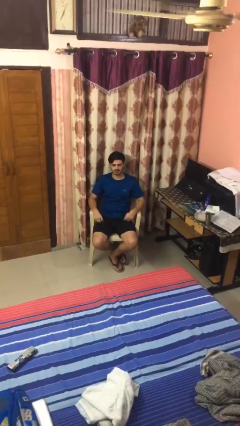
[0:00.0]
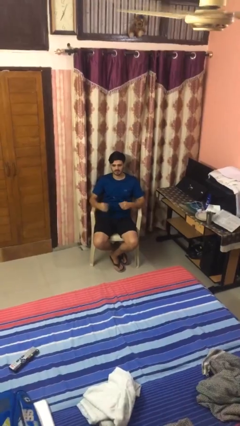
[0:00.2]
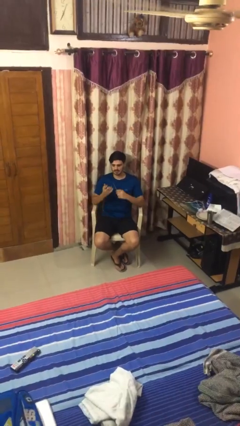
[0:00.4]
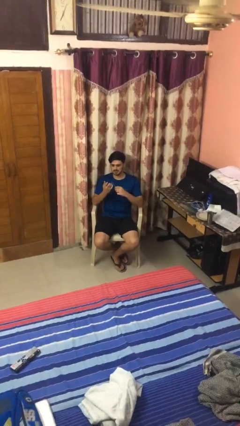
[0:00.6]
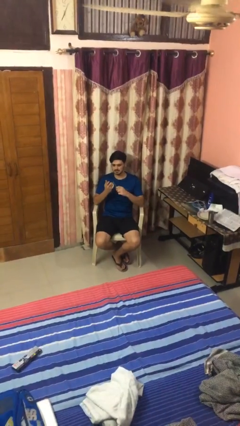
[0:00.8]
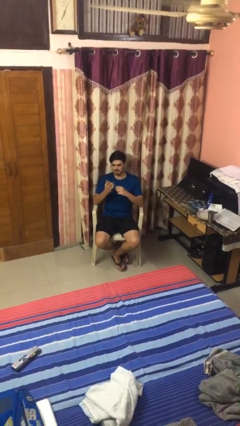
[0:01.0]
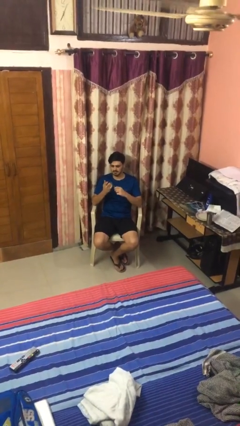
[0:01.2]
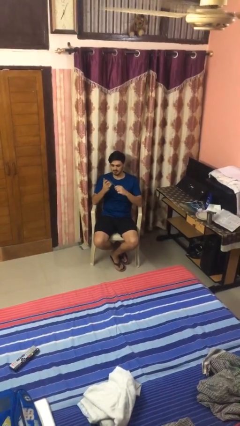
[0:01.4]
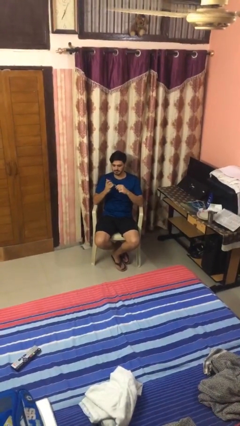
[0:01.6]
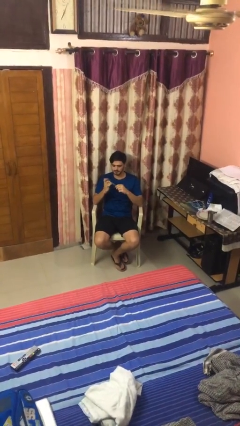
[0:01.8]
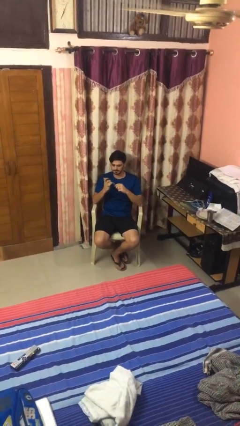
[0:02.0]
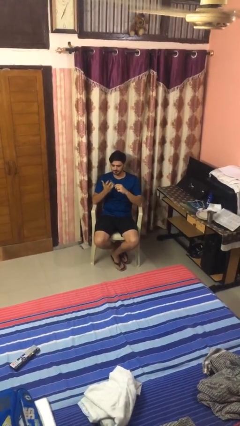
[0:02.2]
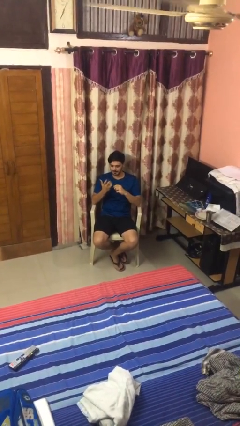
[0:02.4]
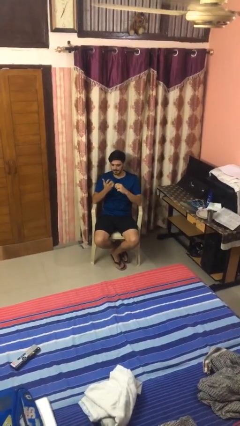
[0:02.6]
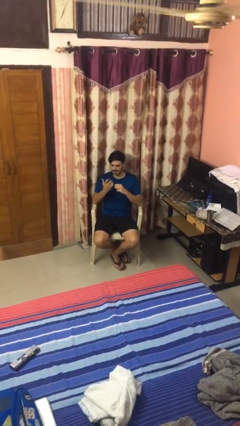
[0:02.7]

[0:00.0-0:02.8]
person files fingernails

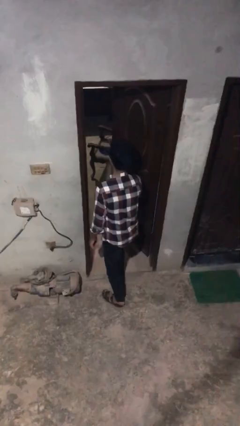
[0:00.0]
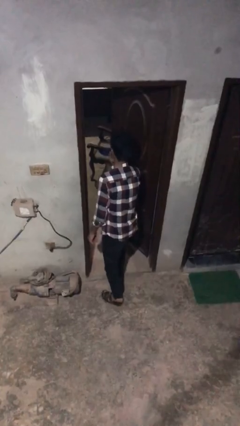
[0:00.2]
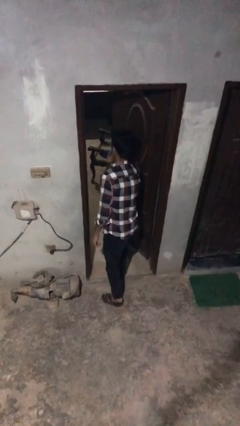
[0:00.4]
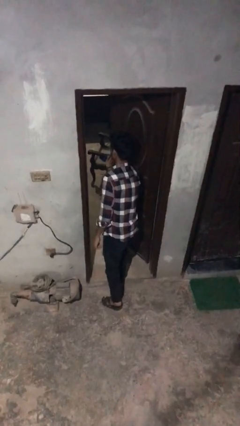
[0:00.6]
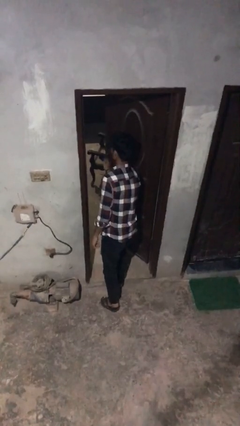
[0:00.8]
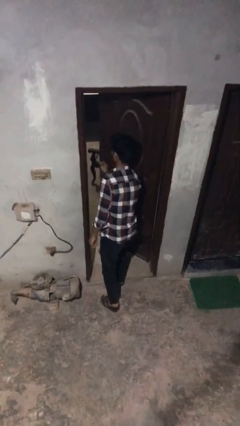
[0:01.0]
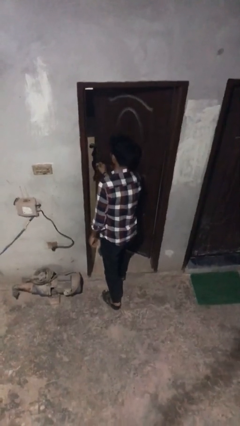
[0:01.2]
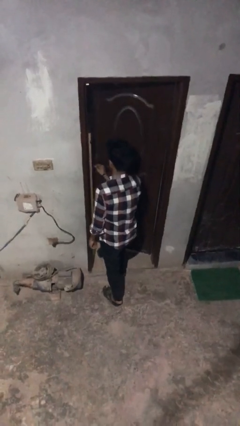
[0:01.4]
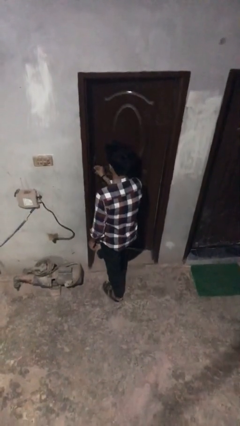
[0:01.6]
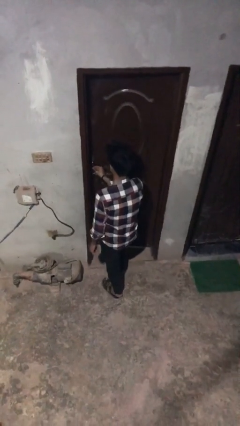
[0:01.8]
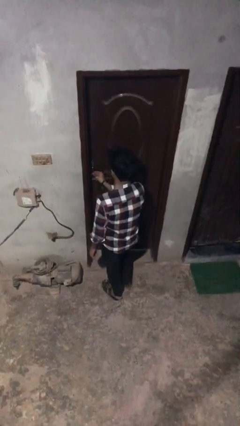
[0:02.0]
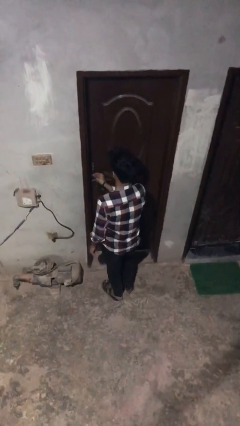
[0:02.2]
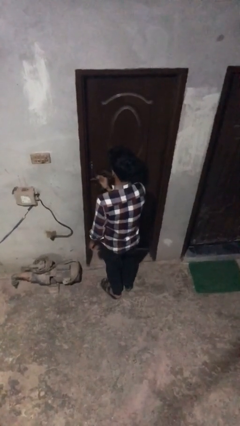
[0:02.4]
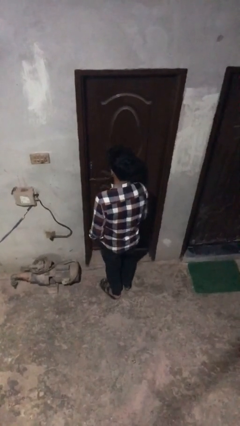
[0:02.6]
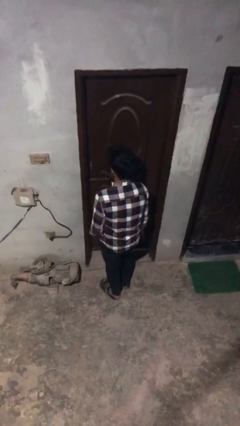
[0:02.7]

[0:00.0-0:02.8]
person closes facility door

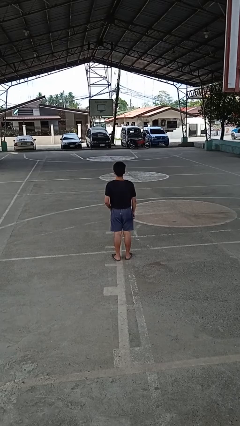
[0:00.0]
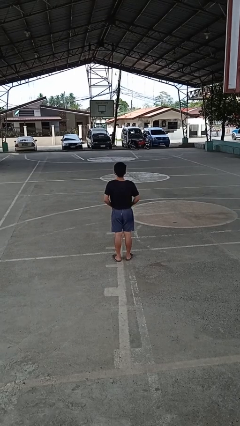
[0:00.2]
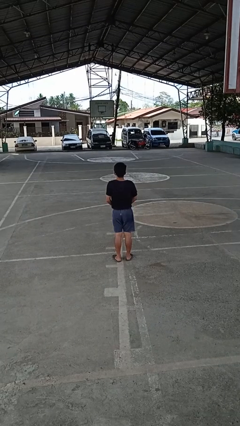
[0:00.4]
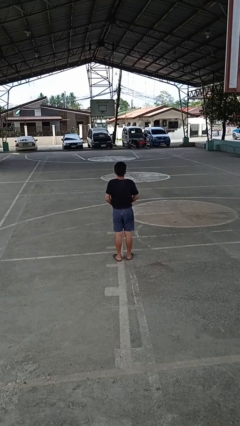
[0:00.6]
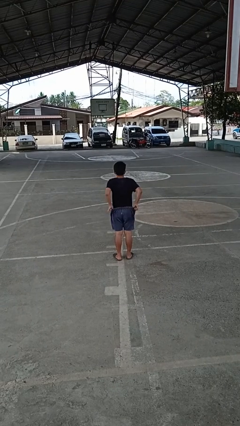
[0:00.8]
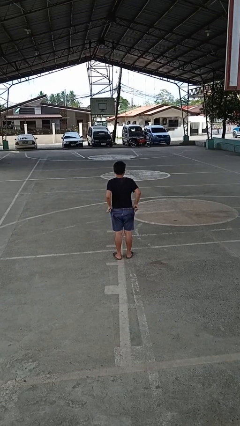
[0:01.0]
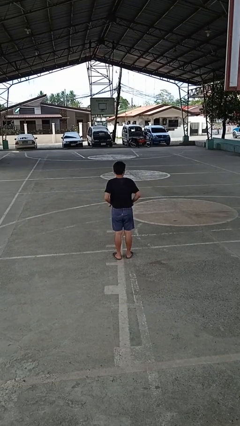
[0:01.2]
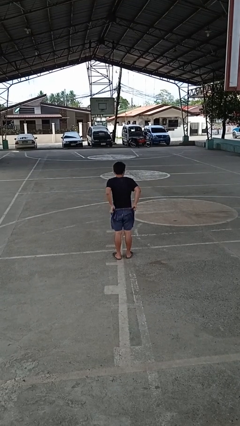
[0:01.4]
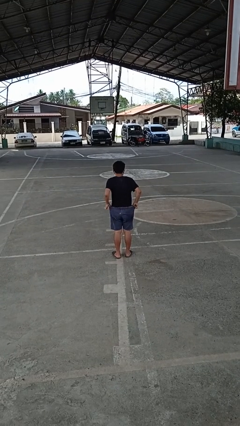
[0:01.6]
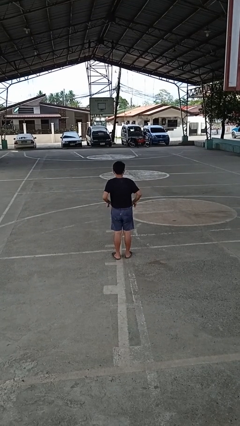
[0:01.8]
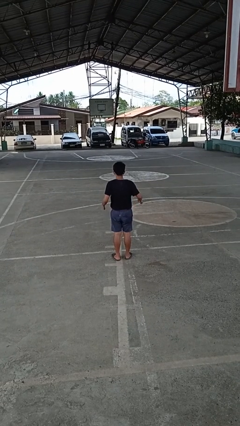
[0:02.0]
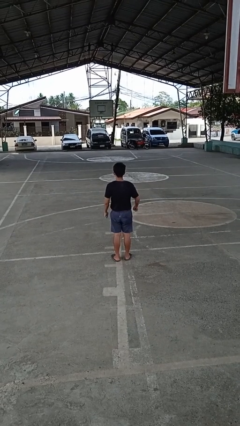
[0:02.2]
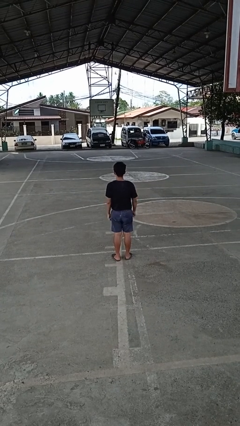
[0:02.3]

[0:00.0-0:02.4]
person hikes up pants

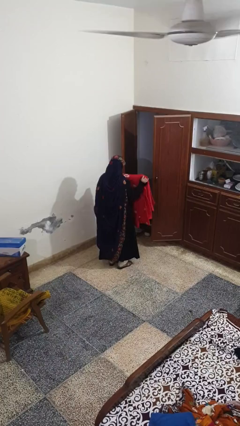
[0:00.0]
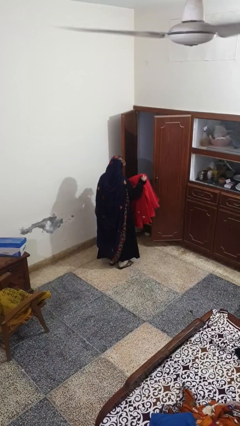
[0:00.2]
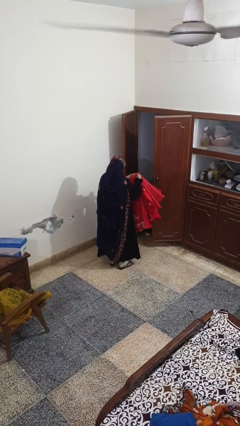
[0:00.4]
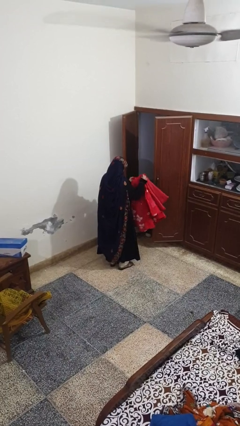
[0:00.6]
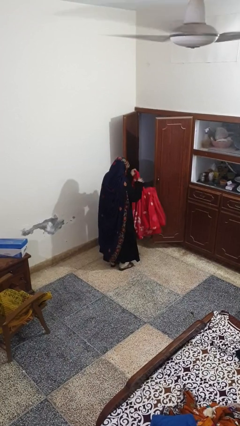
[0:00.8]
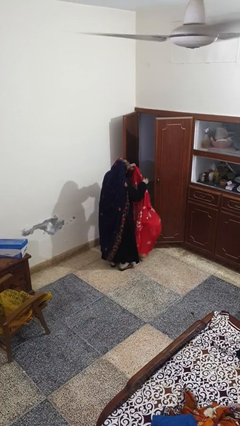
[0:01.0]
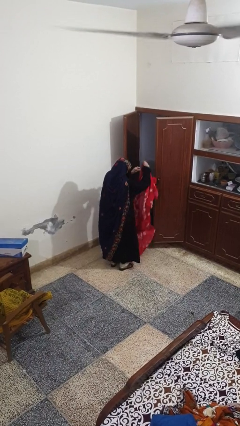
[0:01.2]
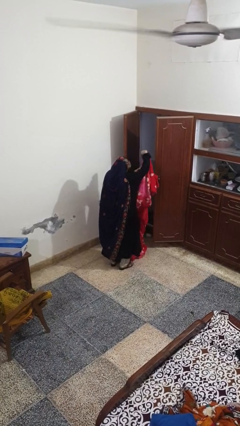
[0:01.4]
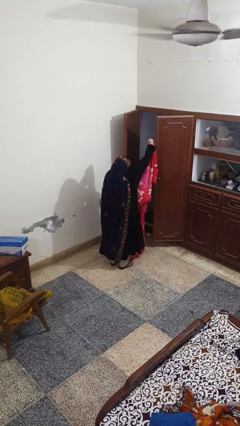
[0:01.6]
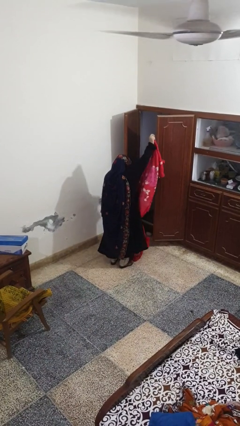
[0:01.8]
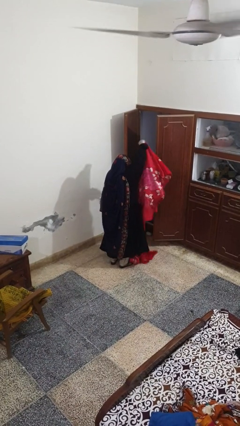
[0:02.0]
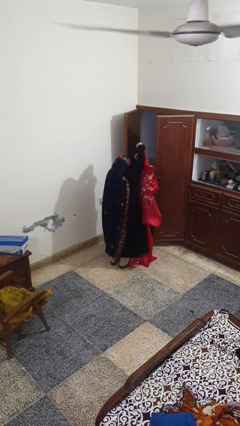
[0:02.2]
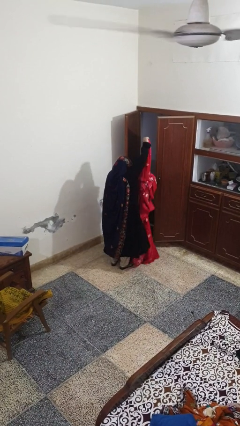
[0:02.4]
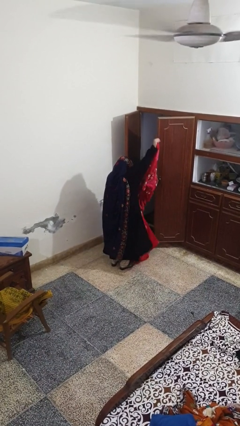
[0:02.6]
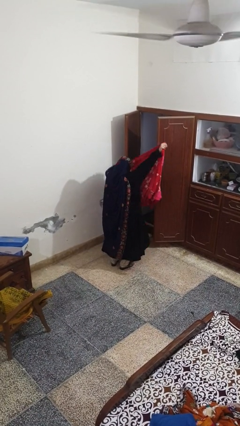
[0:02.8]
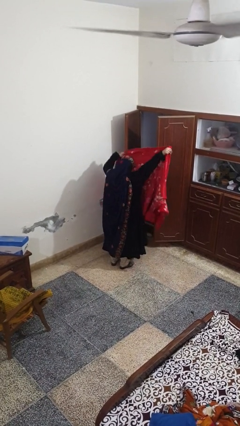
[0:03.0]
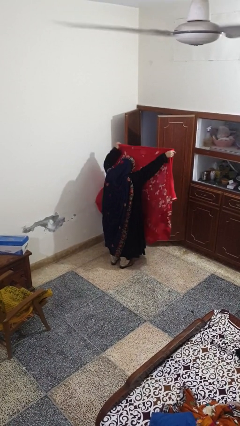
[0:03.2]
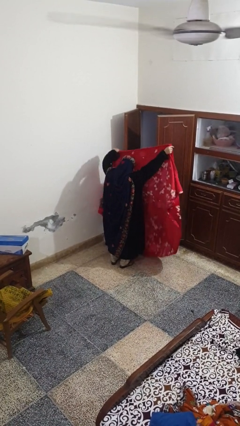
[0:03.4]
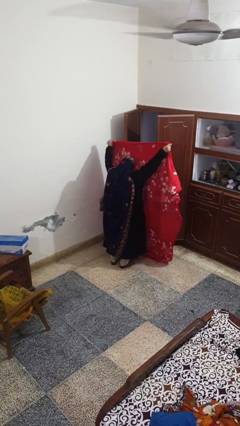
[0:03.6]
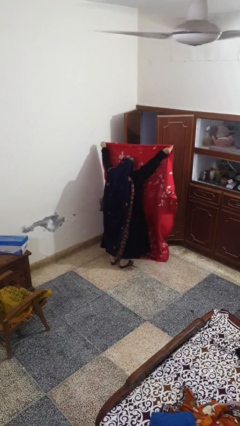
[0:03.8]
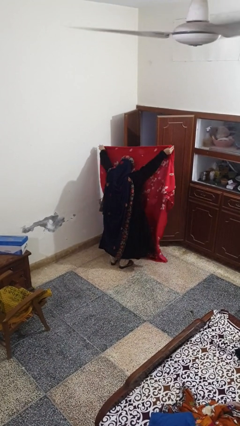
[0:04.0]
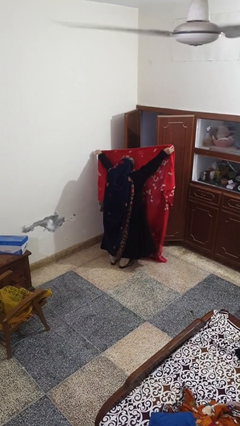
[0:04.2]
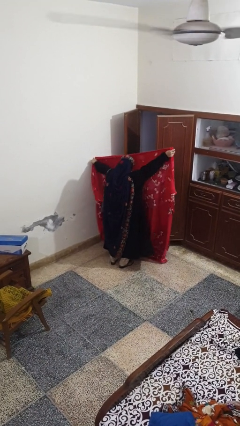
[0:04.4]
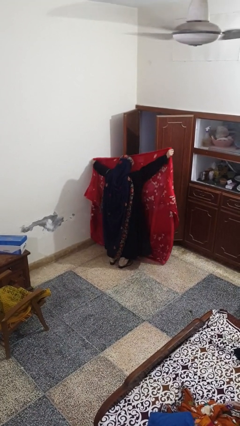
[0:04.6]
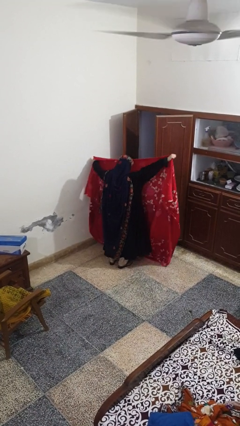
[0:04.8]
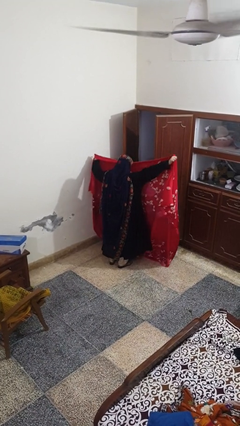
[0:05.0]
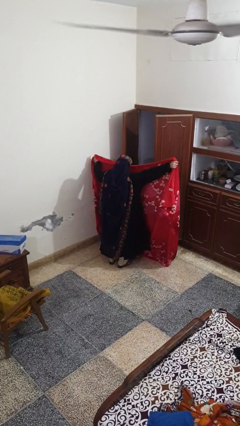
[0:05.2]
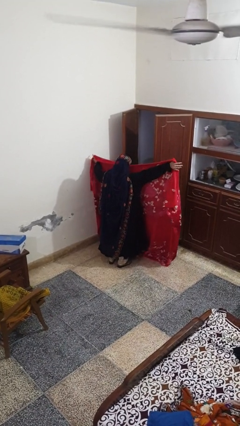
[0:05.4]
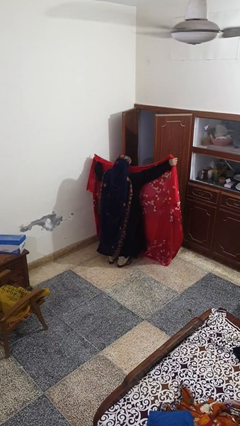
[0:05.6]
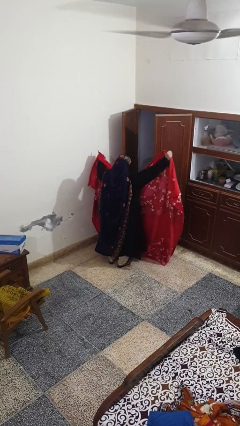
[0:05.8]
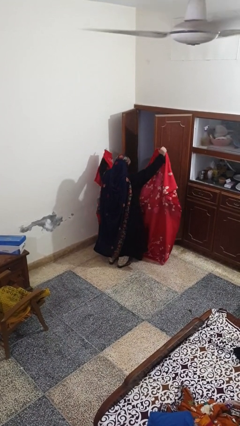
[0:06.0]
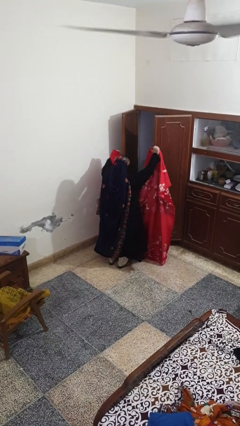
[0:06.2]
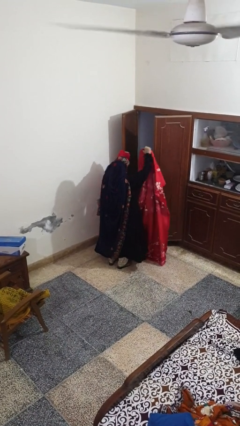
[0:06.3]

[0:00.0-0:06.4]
person unfolds blanket

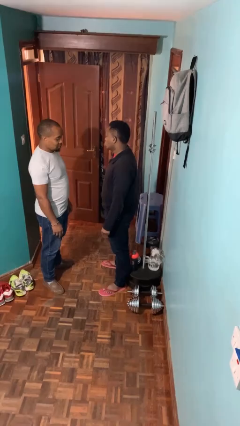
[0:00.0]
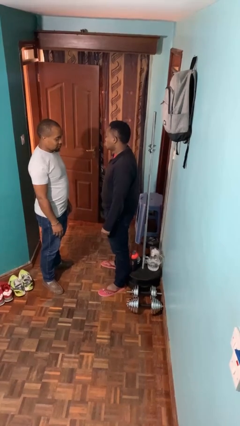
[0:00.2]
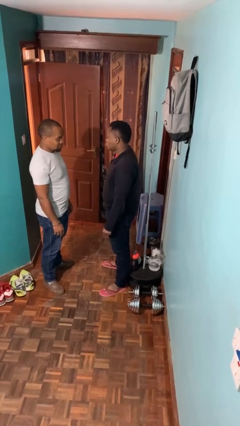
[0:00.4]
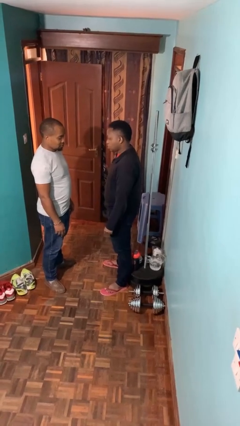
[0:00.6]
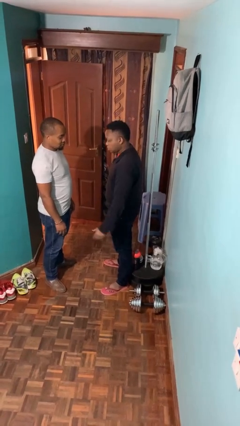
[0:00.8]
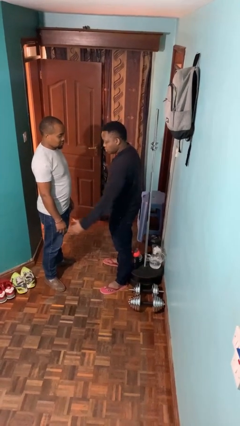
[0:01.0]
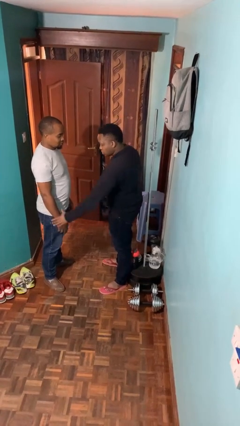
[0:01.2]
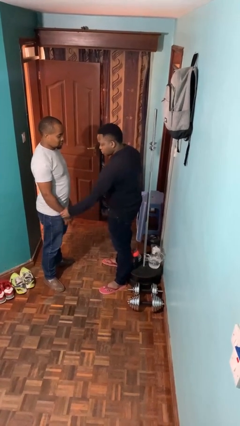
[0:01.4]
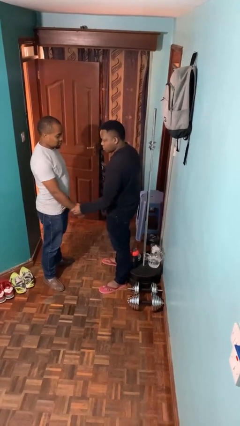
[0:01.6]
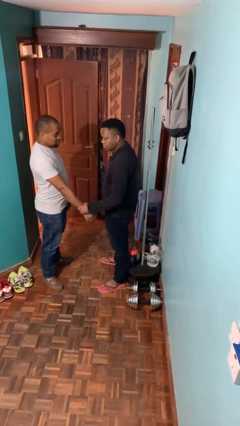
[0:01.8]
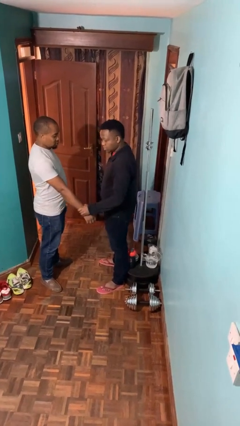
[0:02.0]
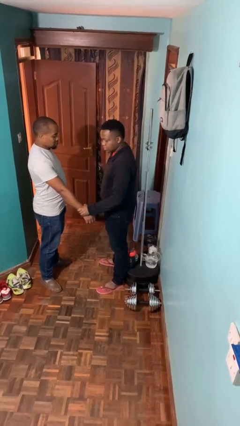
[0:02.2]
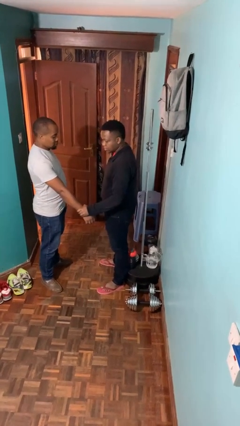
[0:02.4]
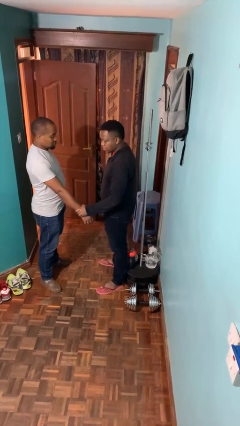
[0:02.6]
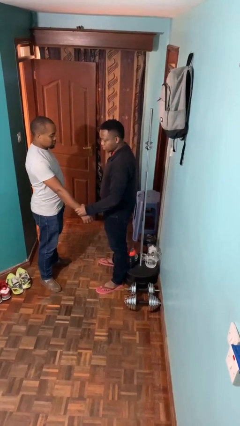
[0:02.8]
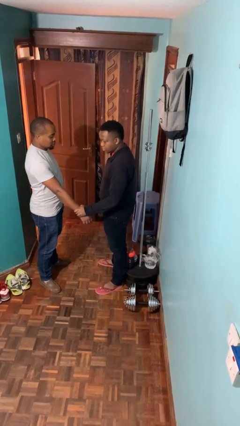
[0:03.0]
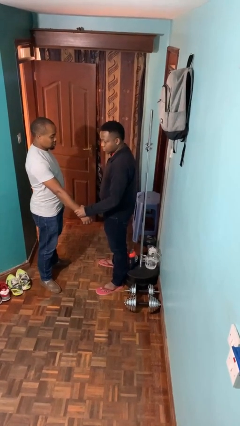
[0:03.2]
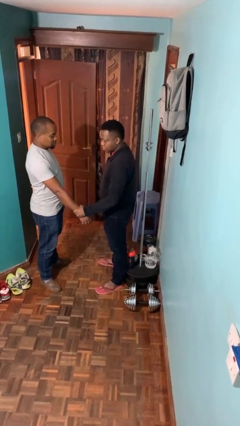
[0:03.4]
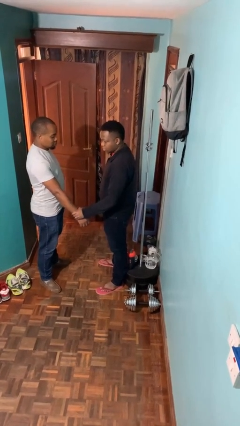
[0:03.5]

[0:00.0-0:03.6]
person grabs person by forearm
